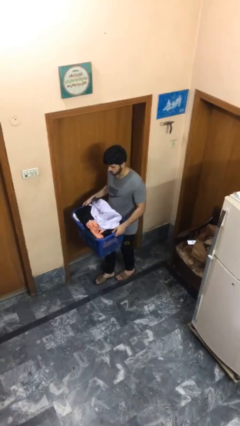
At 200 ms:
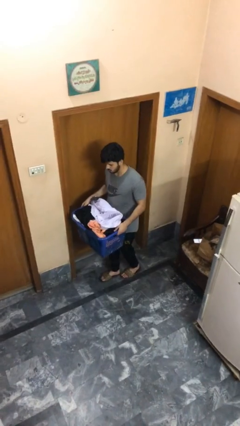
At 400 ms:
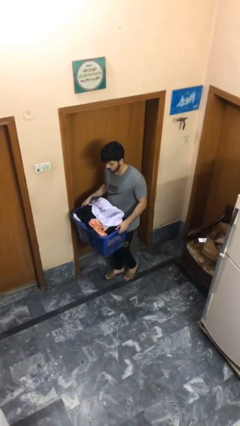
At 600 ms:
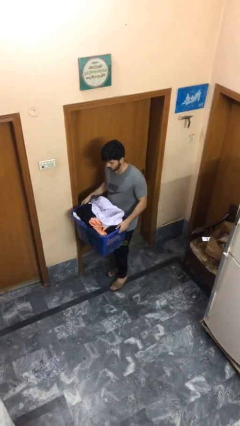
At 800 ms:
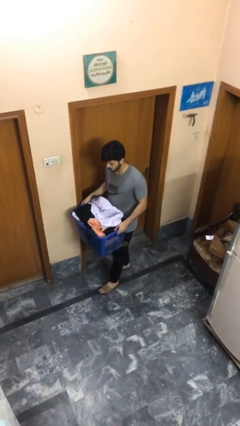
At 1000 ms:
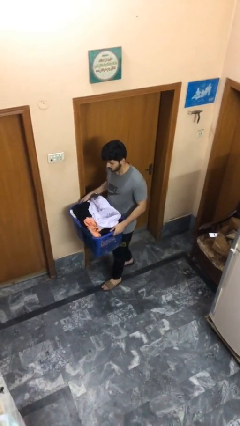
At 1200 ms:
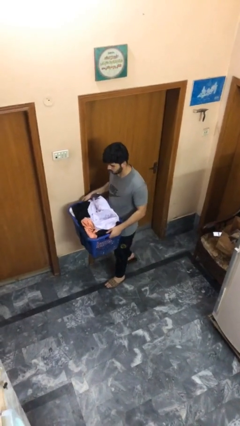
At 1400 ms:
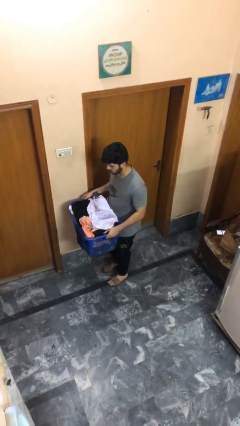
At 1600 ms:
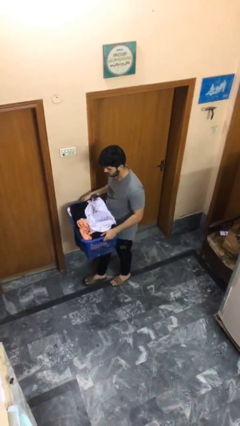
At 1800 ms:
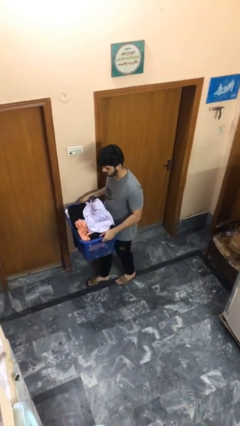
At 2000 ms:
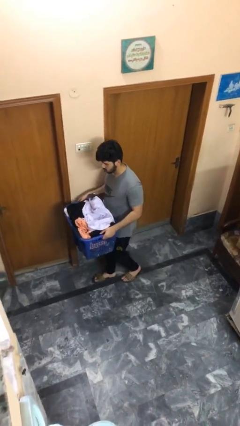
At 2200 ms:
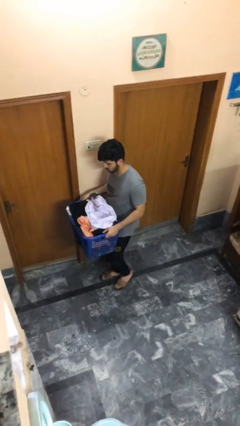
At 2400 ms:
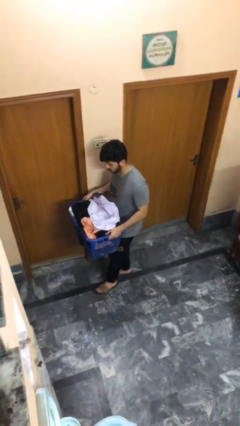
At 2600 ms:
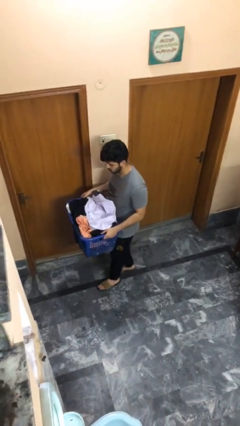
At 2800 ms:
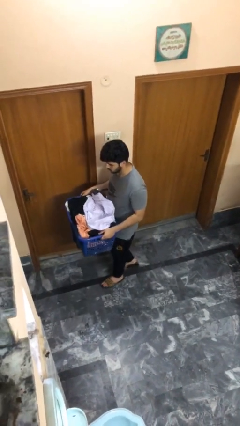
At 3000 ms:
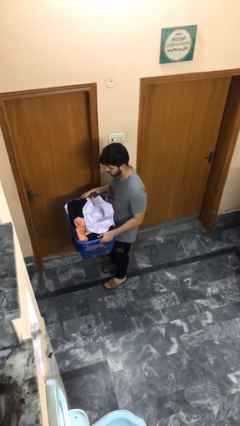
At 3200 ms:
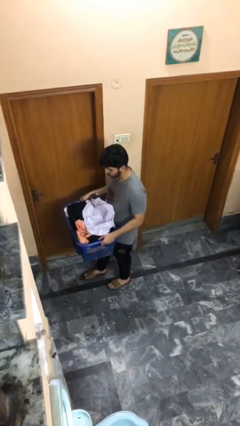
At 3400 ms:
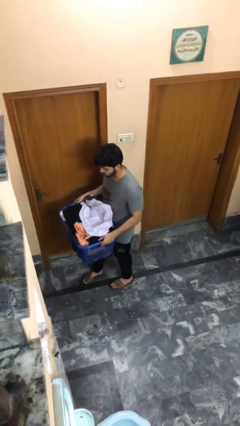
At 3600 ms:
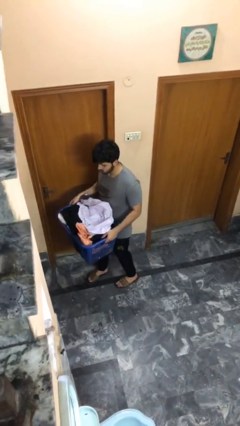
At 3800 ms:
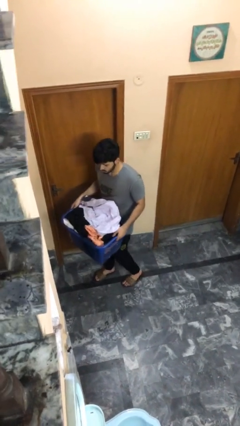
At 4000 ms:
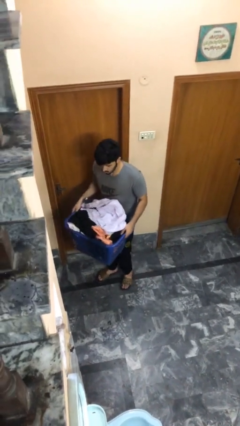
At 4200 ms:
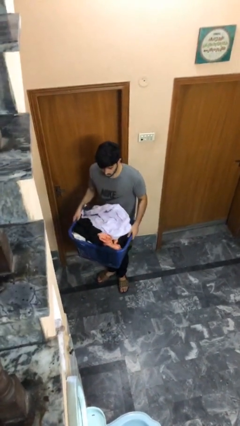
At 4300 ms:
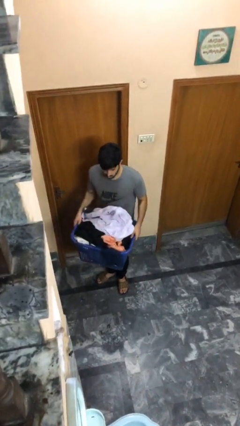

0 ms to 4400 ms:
person carries laundry basket

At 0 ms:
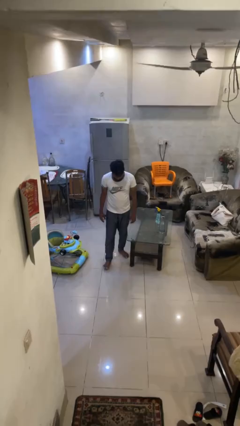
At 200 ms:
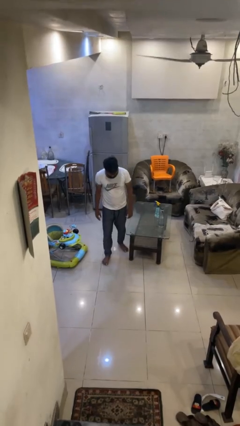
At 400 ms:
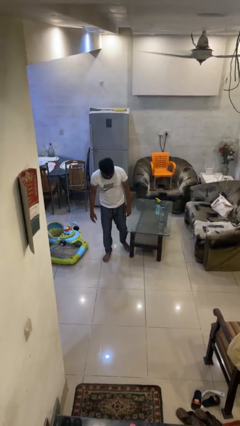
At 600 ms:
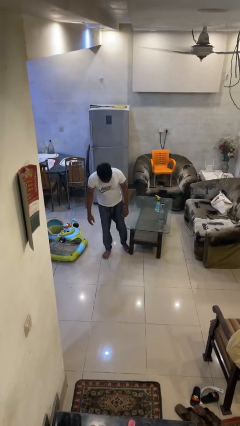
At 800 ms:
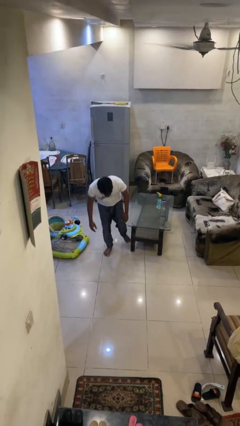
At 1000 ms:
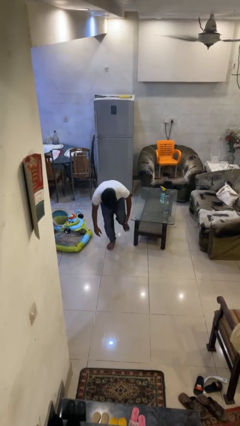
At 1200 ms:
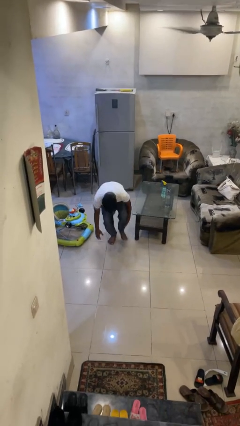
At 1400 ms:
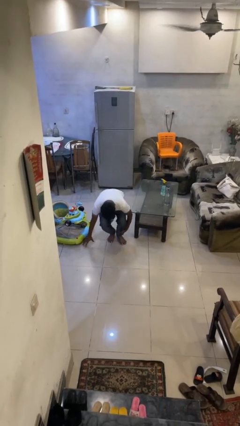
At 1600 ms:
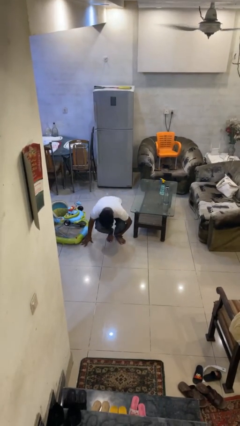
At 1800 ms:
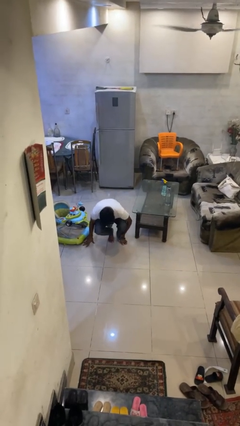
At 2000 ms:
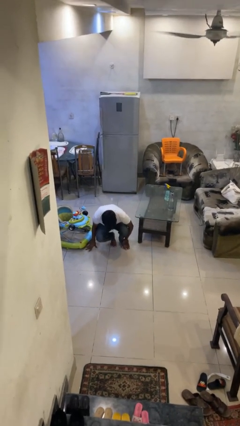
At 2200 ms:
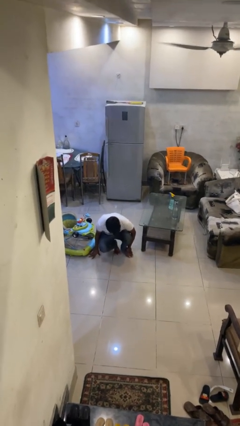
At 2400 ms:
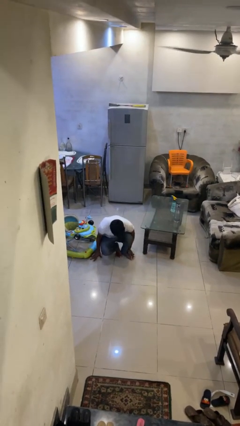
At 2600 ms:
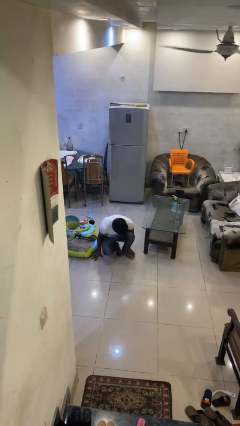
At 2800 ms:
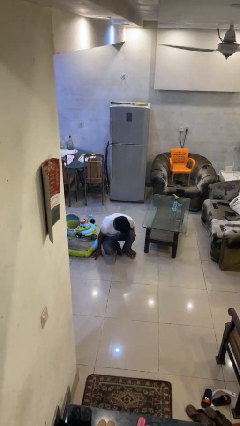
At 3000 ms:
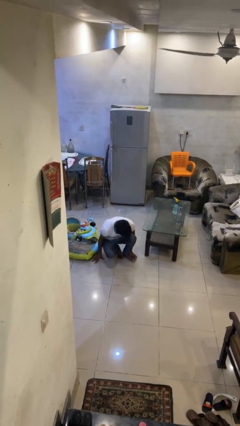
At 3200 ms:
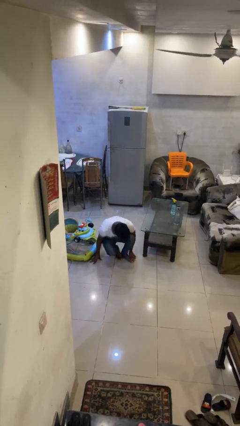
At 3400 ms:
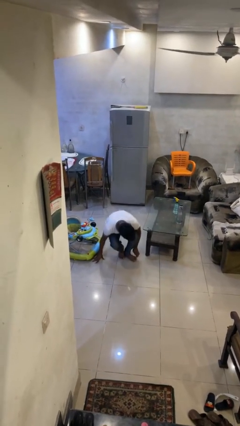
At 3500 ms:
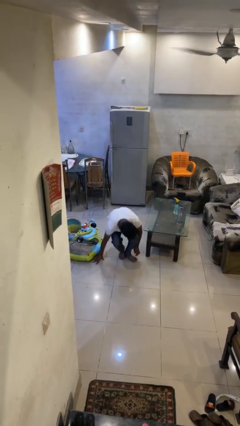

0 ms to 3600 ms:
person trips on object on floor

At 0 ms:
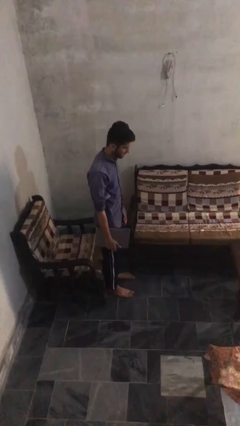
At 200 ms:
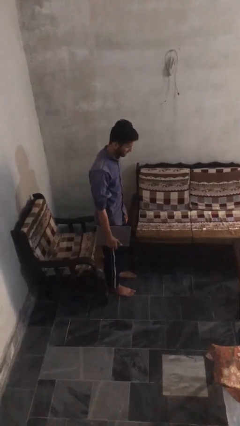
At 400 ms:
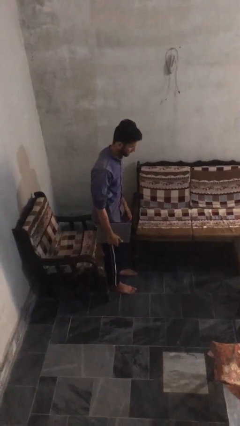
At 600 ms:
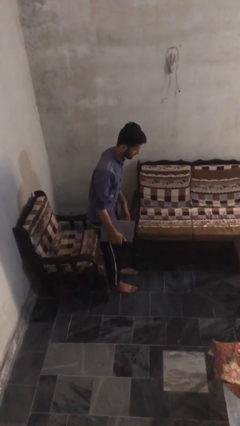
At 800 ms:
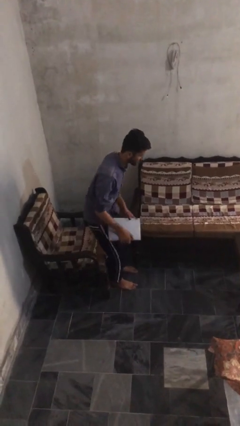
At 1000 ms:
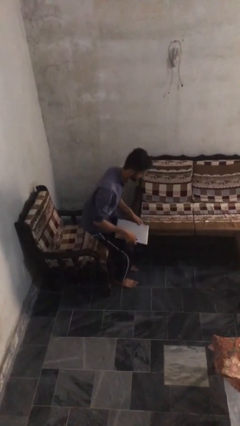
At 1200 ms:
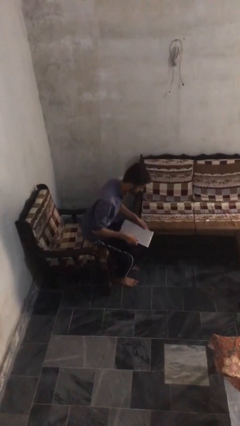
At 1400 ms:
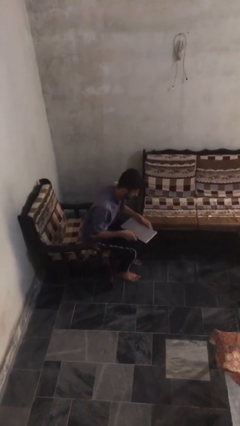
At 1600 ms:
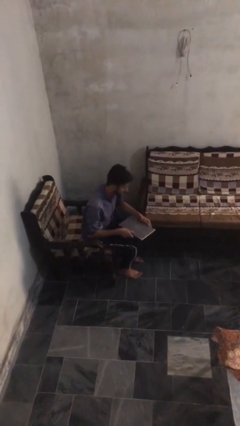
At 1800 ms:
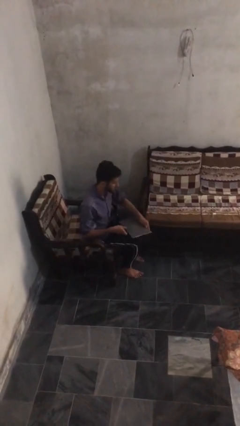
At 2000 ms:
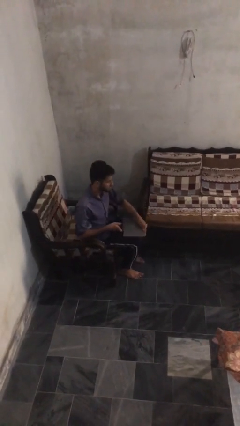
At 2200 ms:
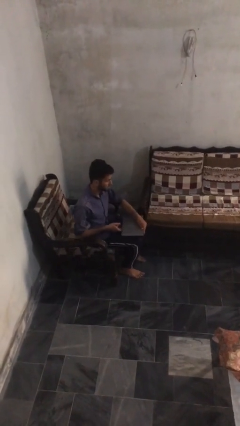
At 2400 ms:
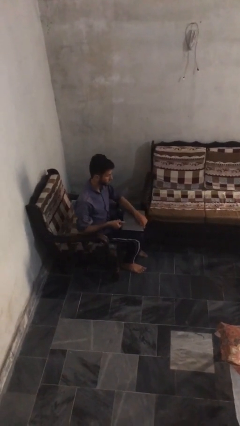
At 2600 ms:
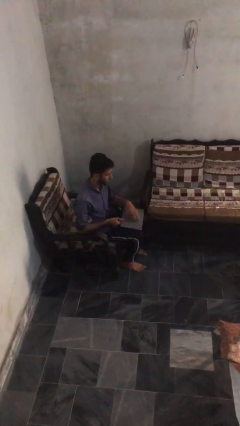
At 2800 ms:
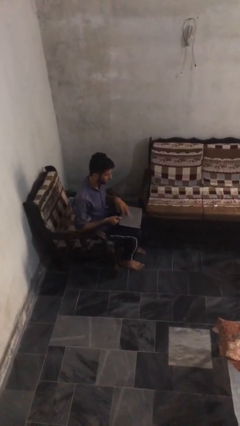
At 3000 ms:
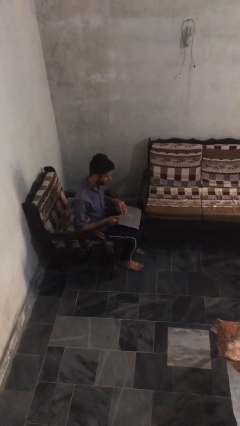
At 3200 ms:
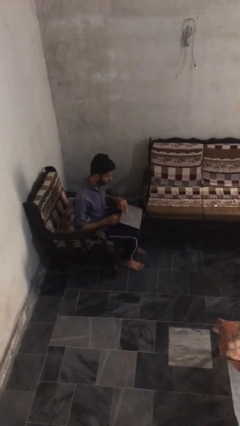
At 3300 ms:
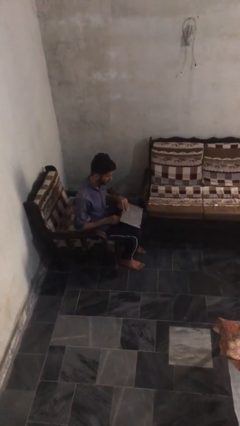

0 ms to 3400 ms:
person sits down

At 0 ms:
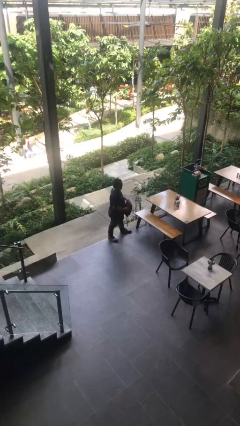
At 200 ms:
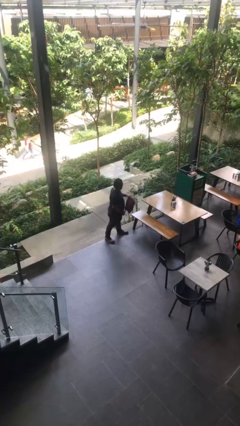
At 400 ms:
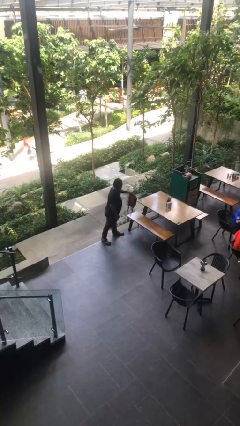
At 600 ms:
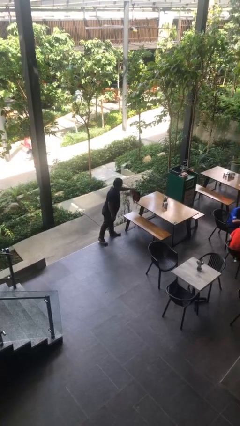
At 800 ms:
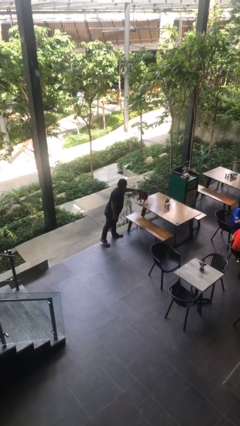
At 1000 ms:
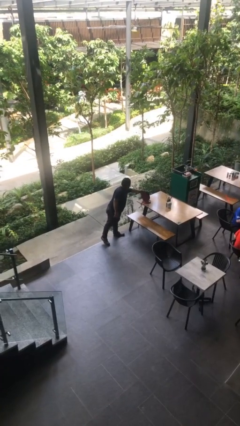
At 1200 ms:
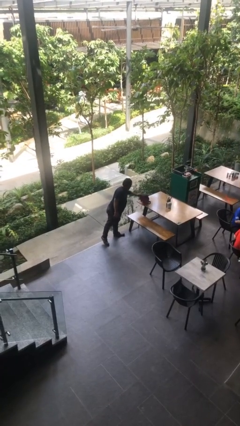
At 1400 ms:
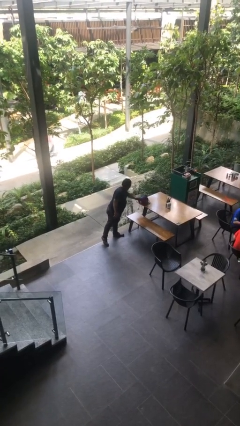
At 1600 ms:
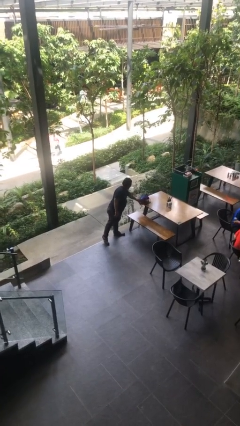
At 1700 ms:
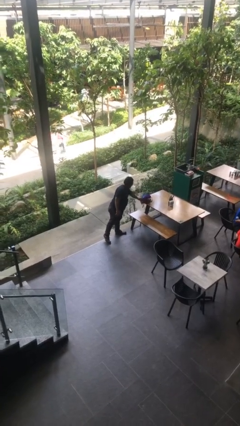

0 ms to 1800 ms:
person puts down object on table

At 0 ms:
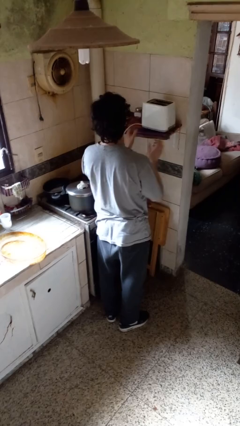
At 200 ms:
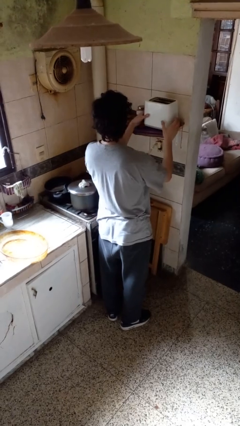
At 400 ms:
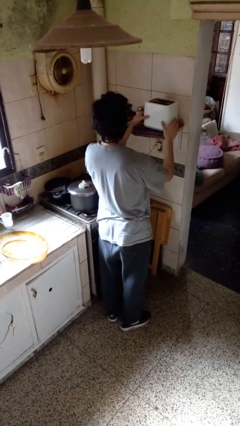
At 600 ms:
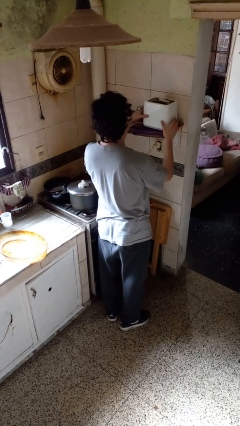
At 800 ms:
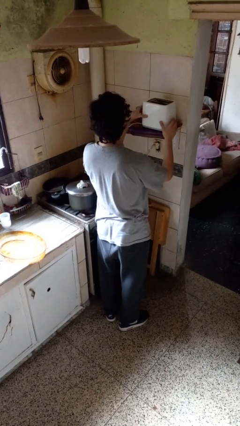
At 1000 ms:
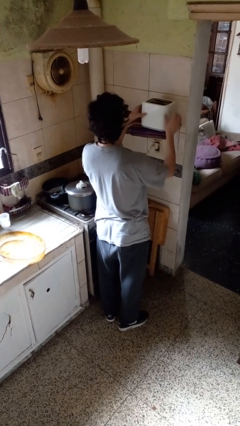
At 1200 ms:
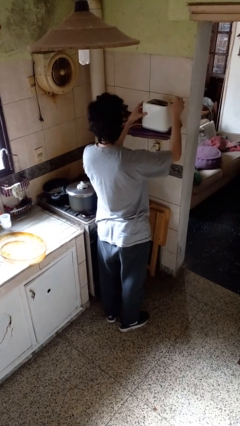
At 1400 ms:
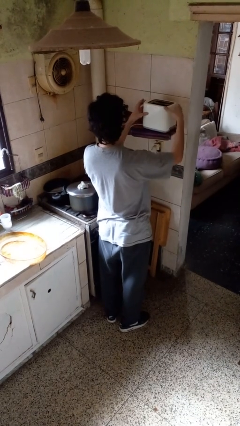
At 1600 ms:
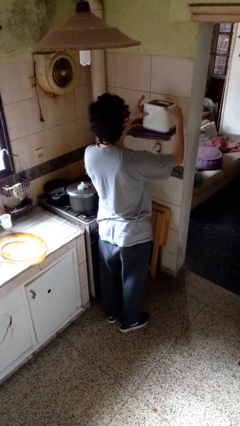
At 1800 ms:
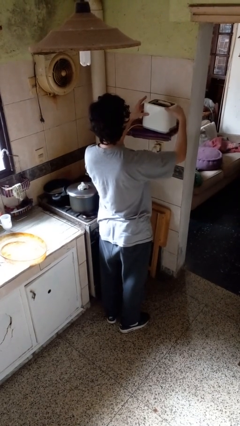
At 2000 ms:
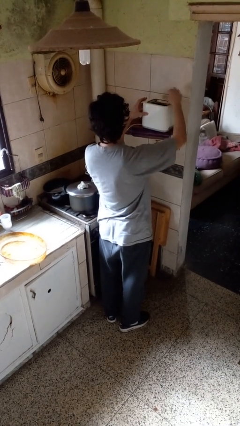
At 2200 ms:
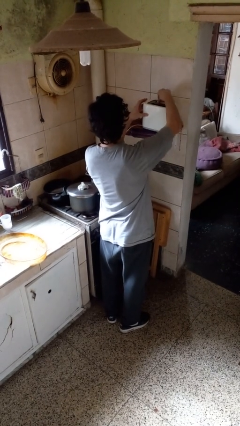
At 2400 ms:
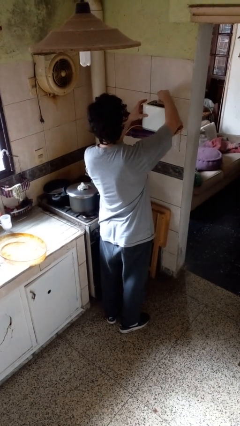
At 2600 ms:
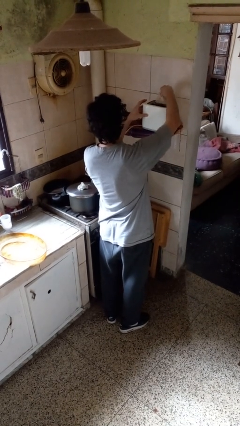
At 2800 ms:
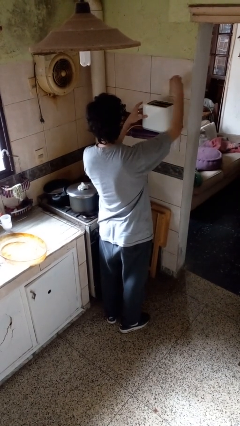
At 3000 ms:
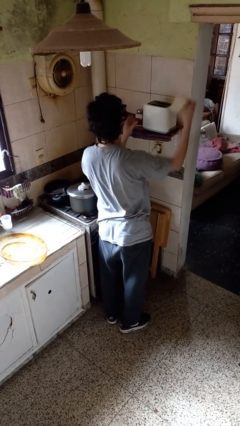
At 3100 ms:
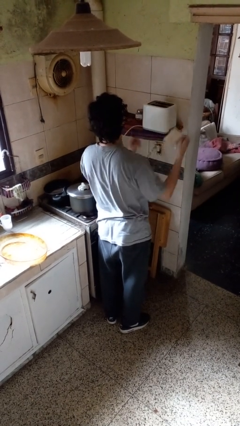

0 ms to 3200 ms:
person takes object from toaster

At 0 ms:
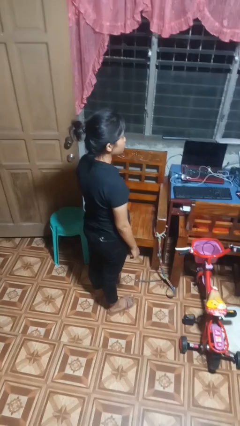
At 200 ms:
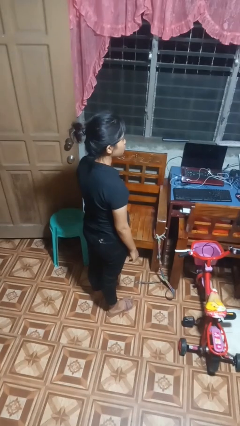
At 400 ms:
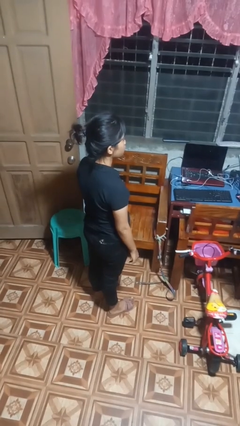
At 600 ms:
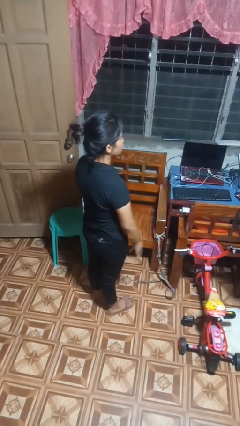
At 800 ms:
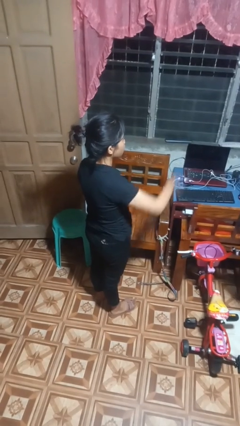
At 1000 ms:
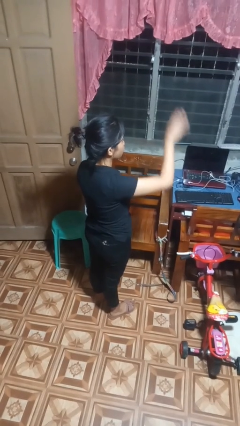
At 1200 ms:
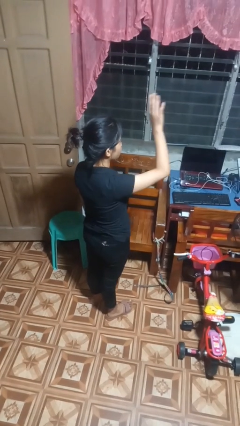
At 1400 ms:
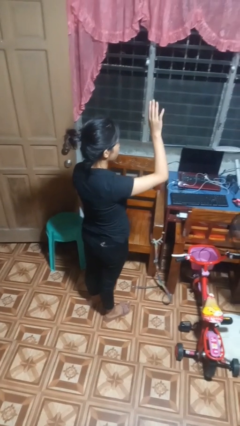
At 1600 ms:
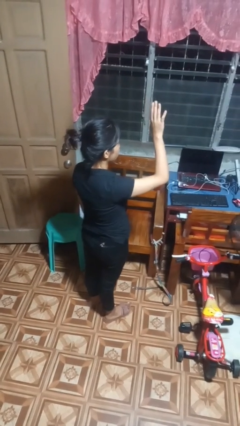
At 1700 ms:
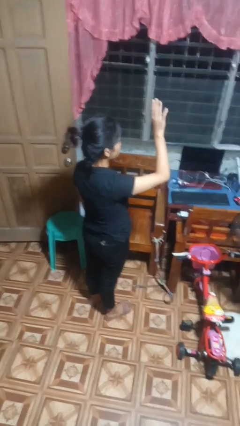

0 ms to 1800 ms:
person gestures swipe up
